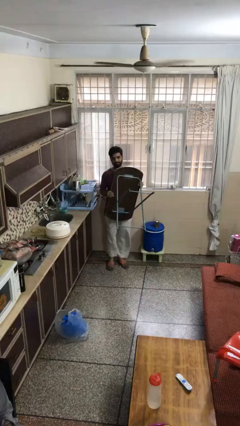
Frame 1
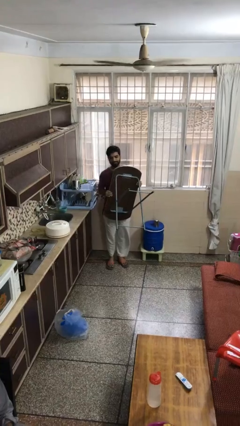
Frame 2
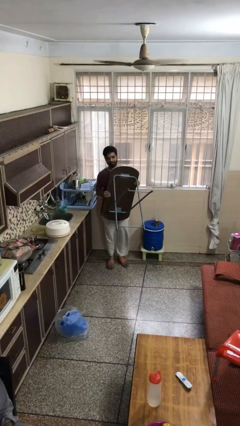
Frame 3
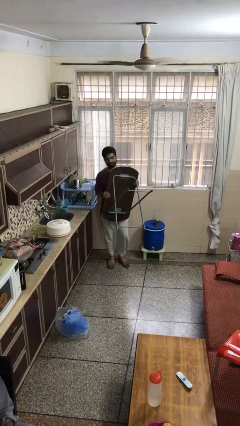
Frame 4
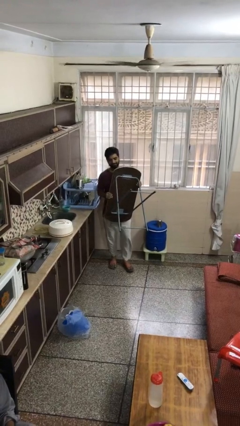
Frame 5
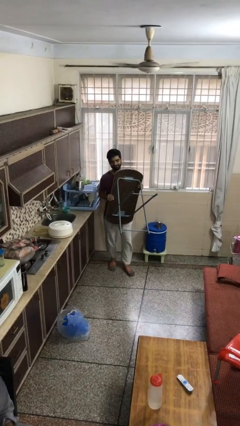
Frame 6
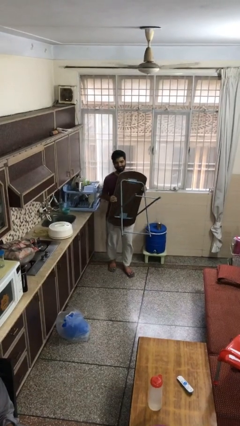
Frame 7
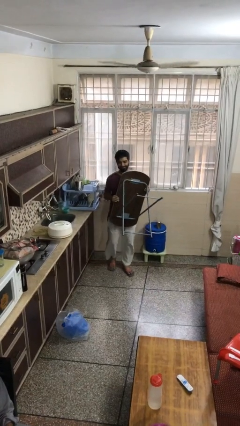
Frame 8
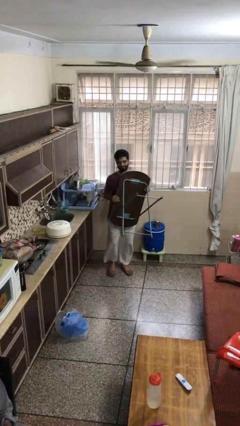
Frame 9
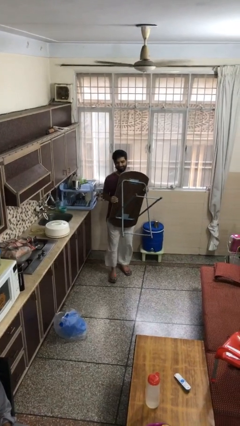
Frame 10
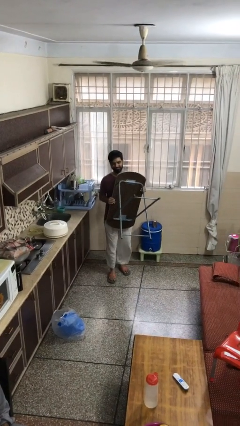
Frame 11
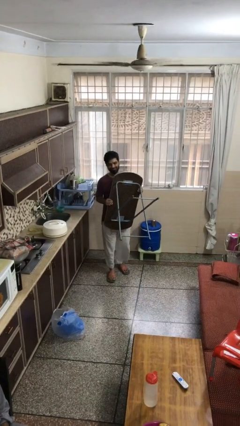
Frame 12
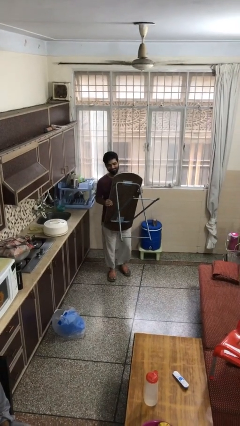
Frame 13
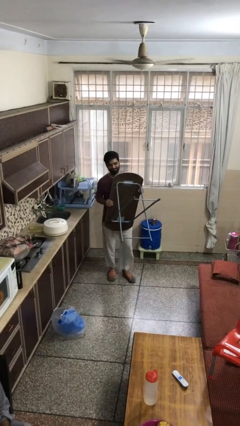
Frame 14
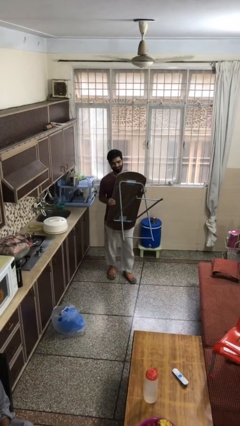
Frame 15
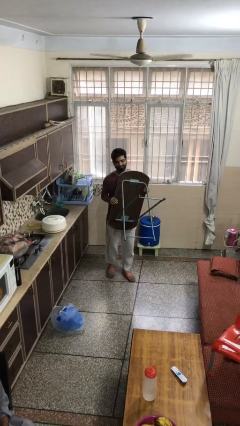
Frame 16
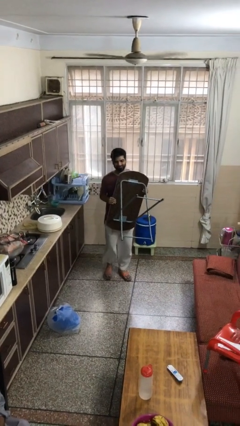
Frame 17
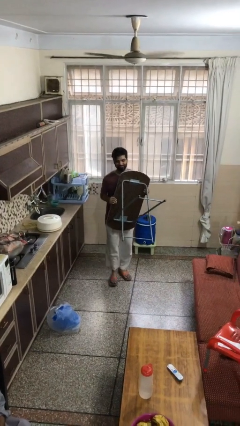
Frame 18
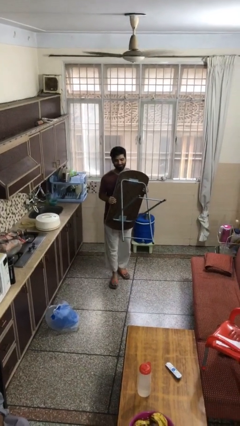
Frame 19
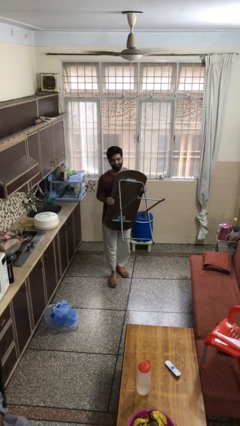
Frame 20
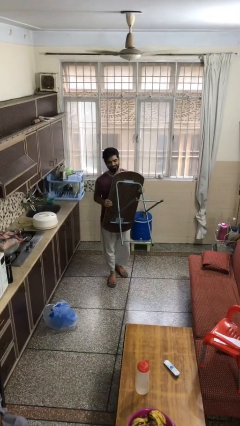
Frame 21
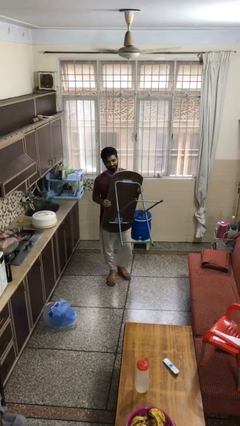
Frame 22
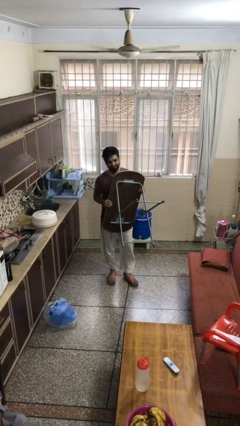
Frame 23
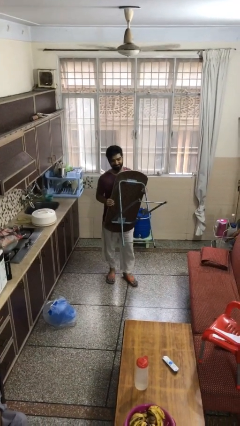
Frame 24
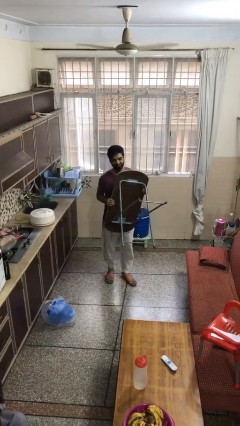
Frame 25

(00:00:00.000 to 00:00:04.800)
person carries heavy object

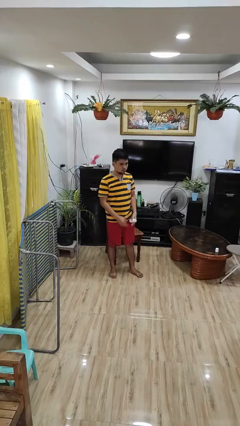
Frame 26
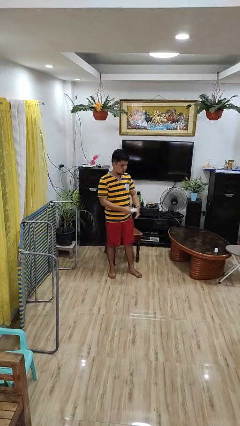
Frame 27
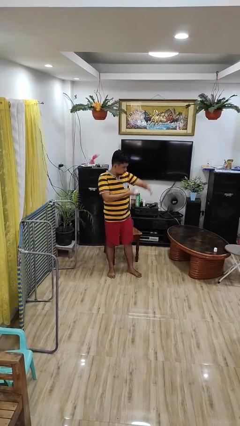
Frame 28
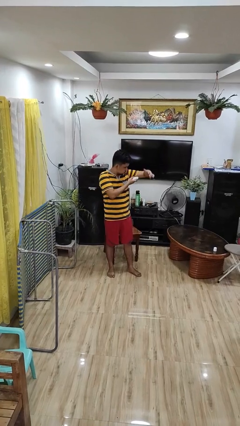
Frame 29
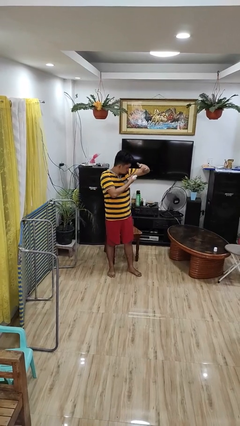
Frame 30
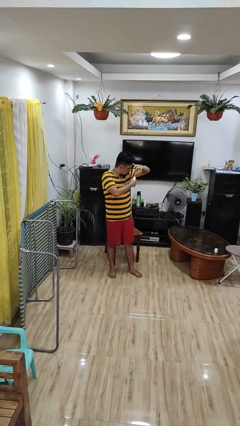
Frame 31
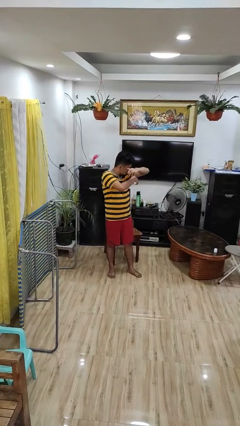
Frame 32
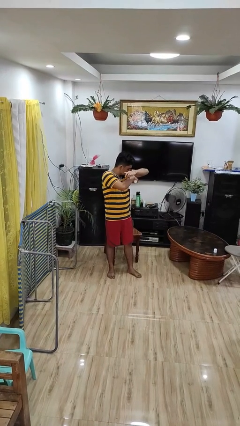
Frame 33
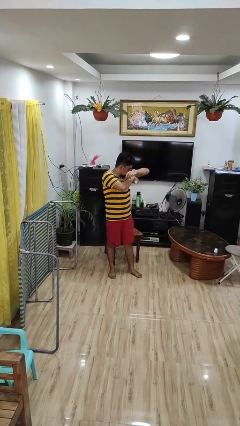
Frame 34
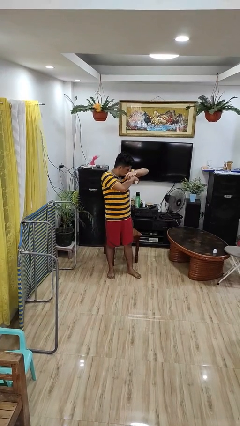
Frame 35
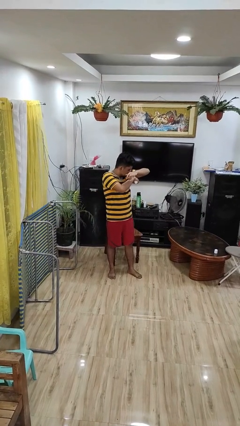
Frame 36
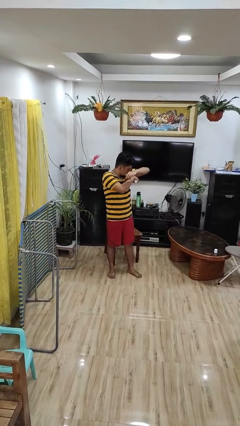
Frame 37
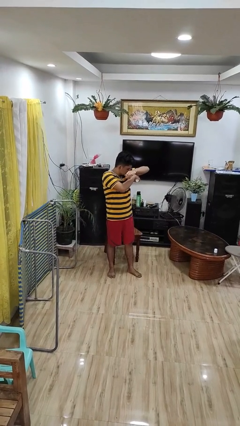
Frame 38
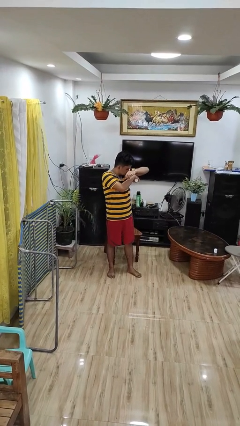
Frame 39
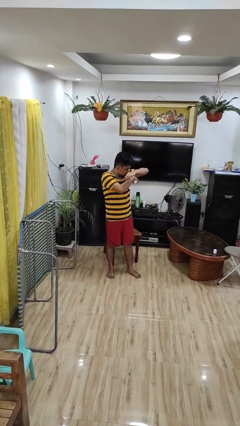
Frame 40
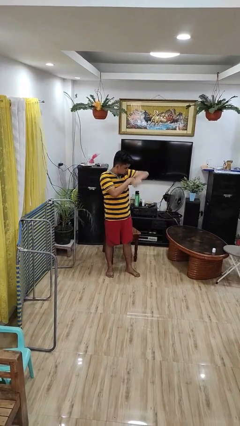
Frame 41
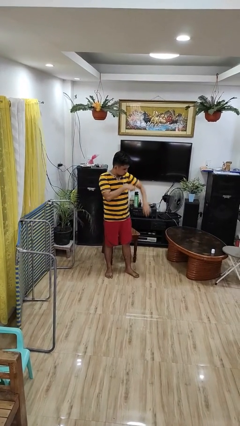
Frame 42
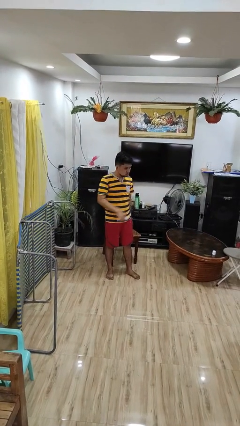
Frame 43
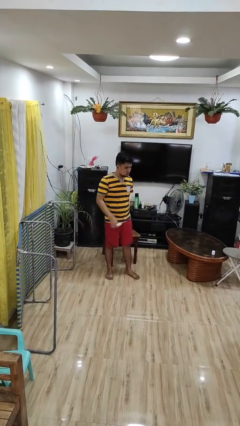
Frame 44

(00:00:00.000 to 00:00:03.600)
person applies deodorant

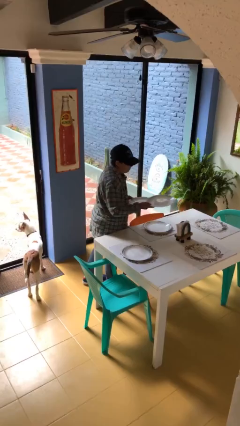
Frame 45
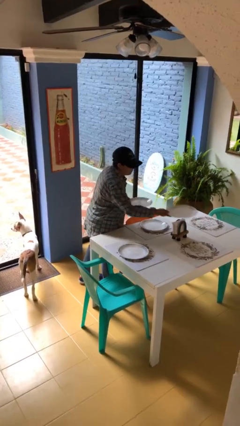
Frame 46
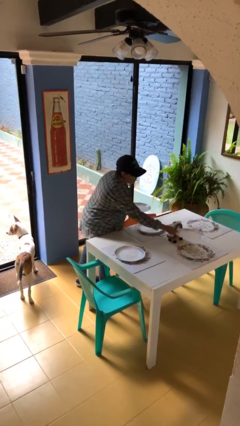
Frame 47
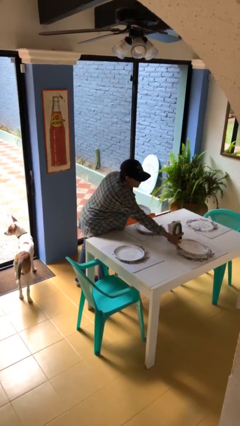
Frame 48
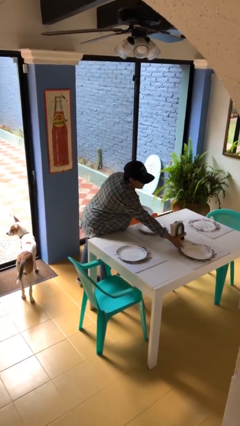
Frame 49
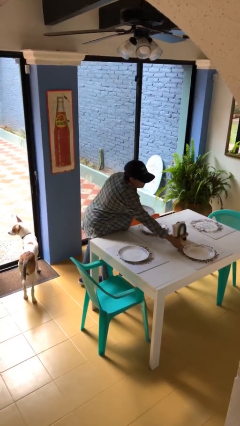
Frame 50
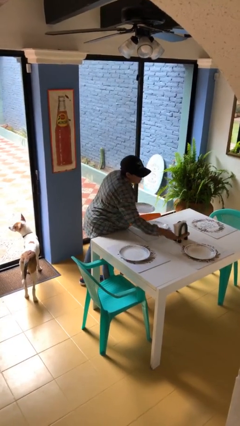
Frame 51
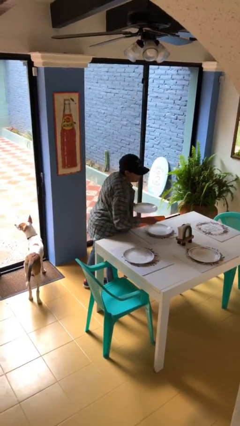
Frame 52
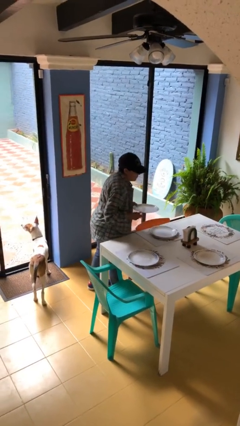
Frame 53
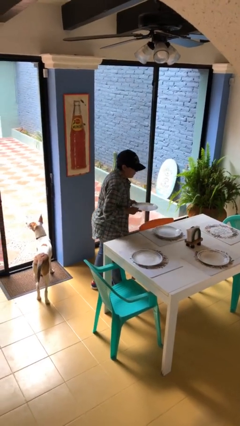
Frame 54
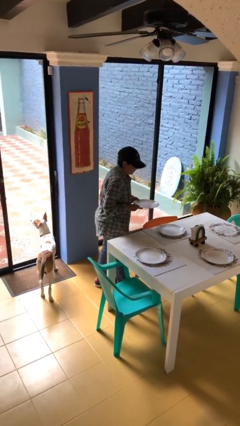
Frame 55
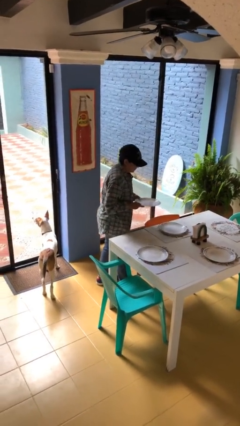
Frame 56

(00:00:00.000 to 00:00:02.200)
person sets table

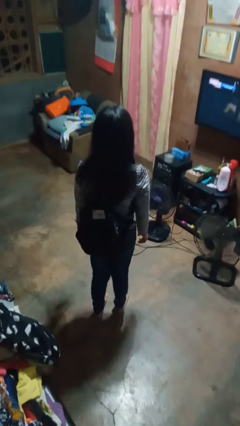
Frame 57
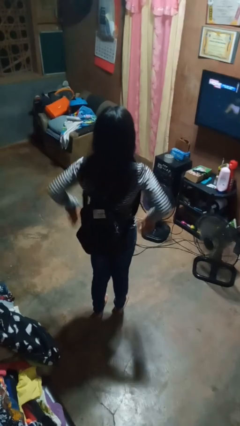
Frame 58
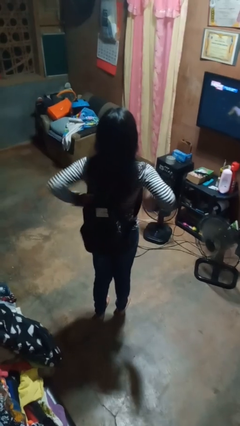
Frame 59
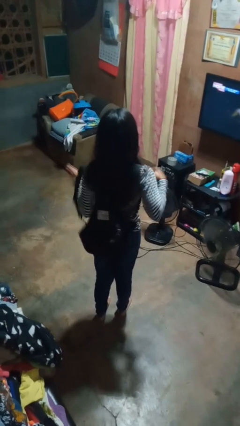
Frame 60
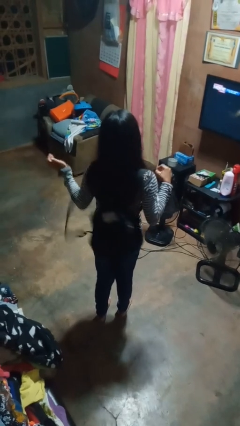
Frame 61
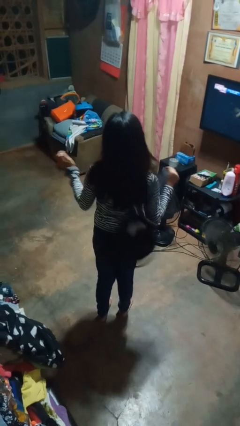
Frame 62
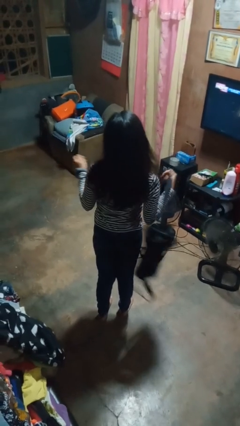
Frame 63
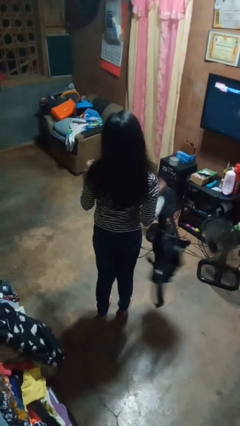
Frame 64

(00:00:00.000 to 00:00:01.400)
person takes off backpack

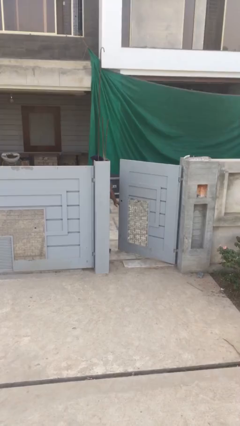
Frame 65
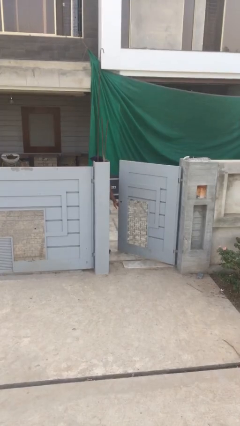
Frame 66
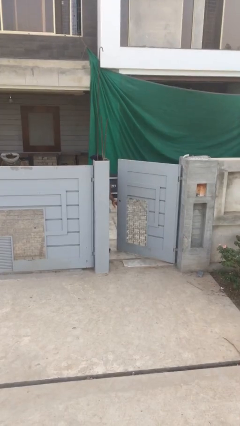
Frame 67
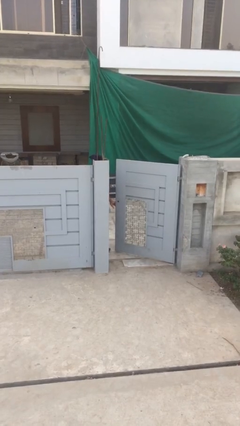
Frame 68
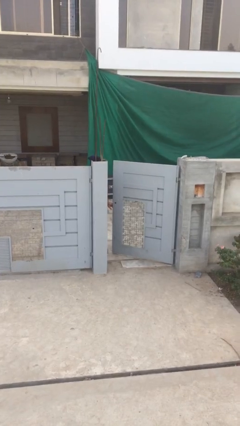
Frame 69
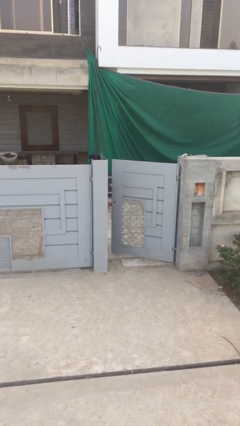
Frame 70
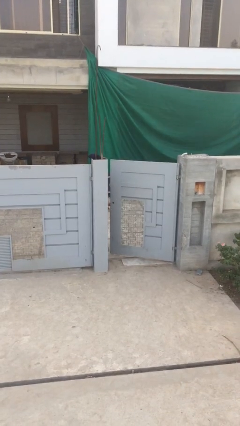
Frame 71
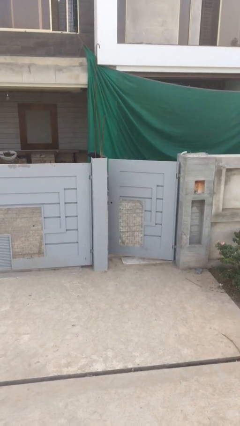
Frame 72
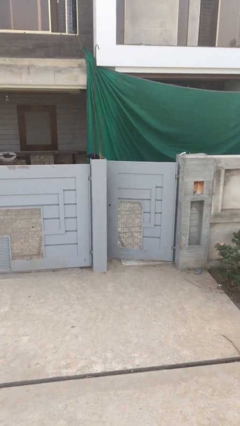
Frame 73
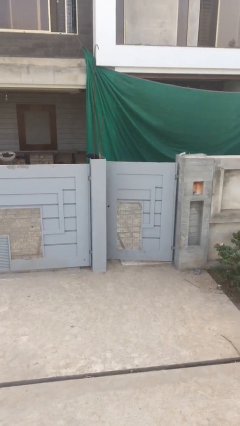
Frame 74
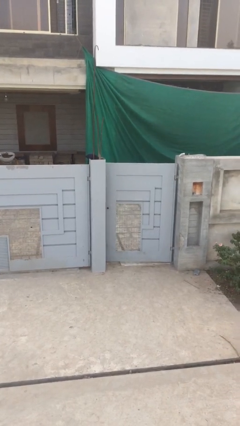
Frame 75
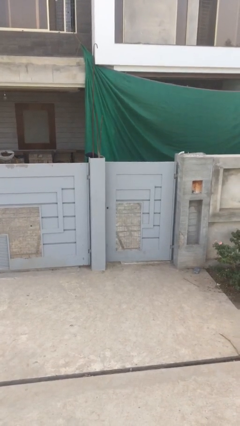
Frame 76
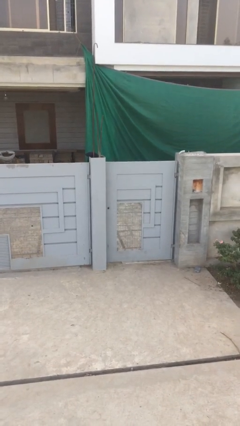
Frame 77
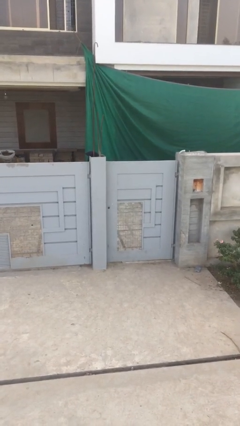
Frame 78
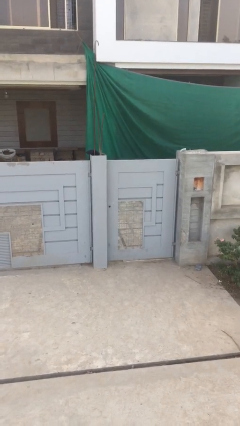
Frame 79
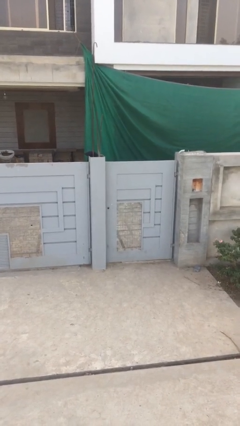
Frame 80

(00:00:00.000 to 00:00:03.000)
person closes facility door

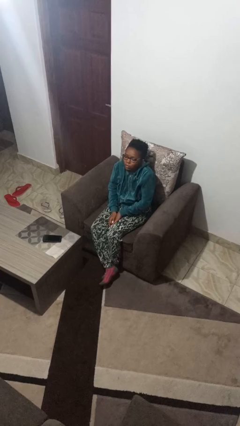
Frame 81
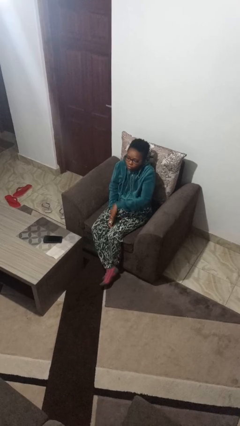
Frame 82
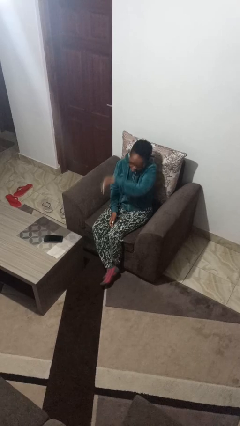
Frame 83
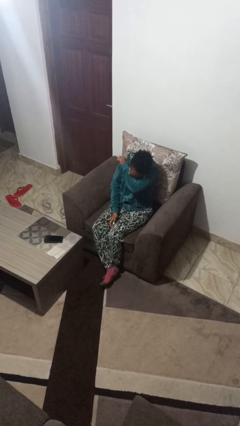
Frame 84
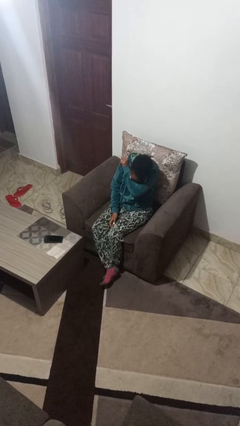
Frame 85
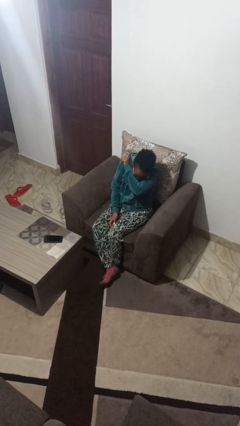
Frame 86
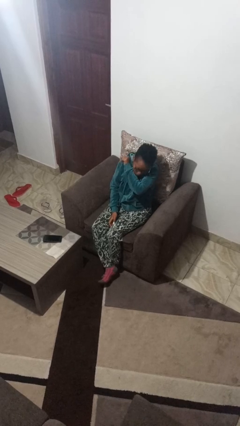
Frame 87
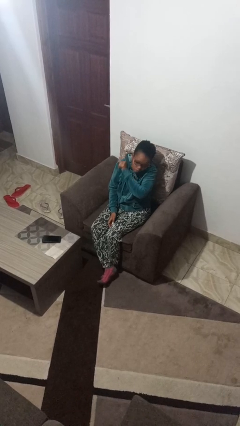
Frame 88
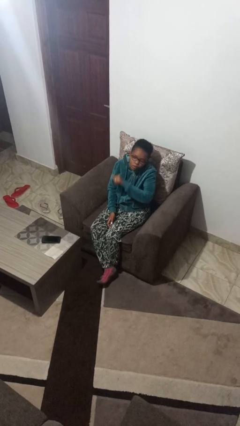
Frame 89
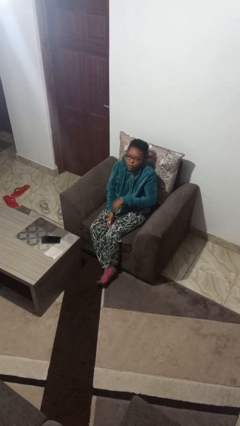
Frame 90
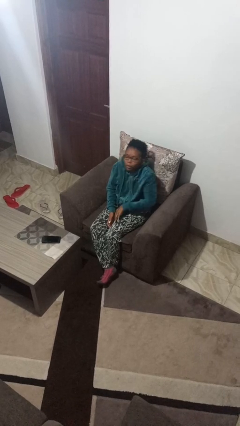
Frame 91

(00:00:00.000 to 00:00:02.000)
person sneezes into arm

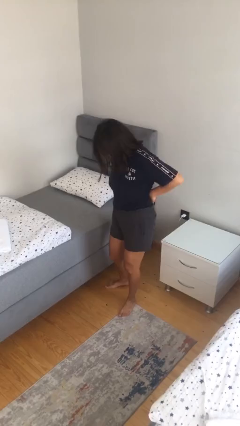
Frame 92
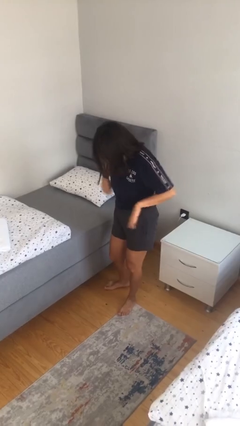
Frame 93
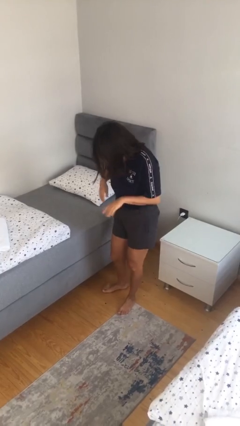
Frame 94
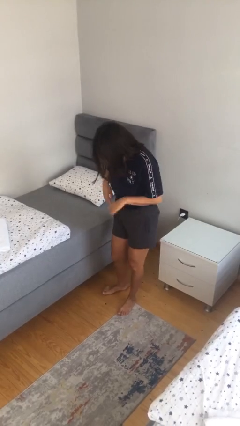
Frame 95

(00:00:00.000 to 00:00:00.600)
person untucks shirt
